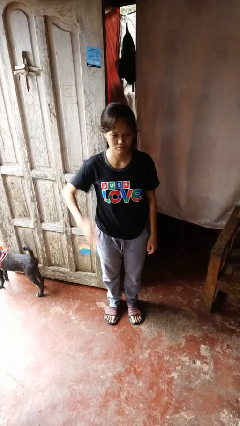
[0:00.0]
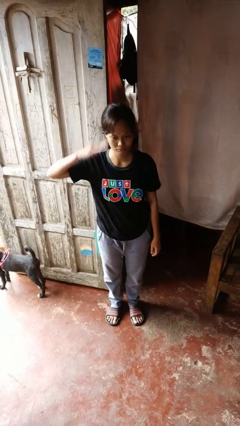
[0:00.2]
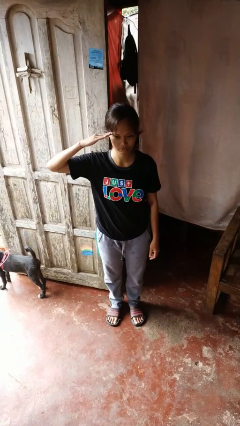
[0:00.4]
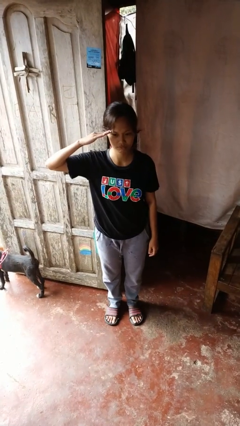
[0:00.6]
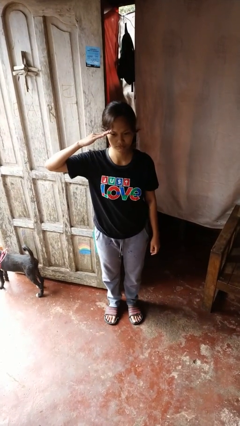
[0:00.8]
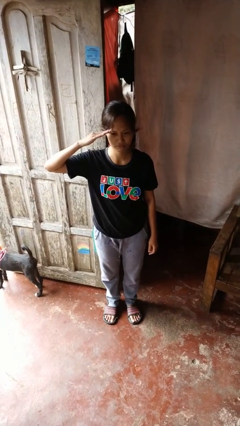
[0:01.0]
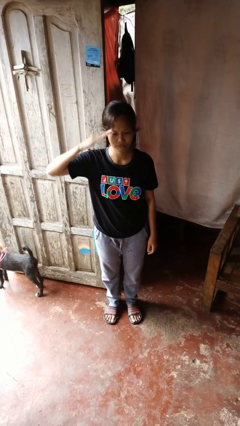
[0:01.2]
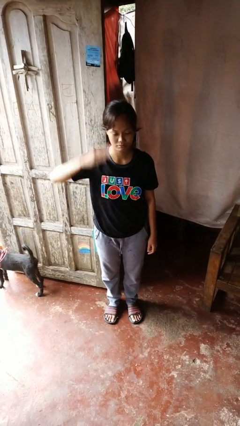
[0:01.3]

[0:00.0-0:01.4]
person salutes

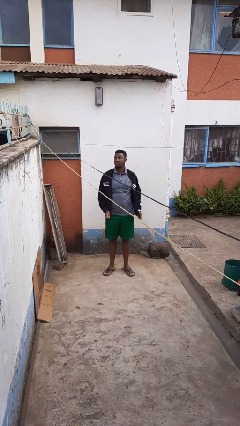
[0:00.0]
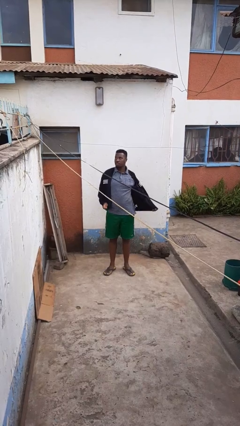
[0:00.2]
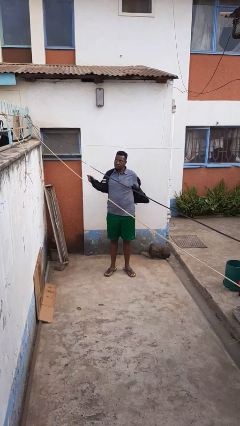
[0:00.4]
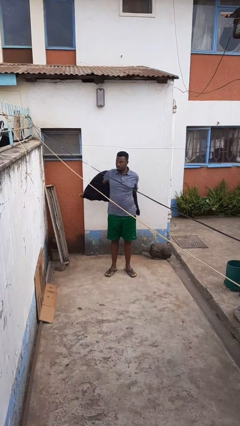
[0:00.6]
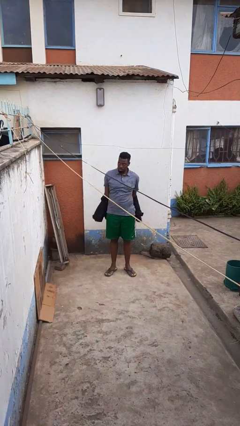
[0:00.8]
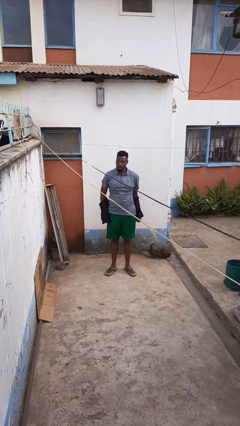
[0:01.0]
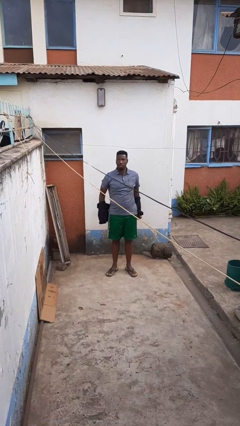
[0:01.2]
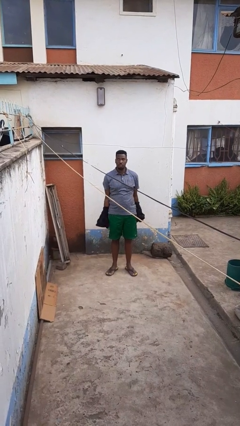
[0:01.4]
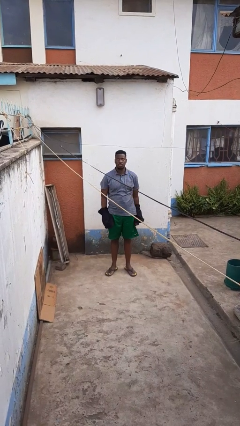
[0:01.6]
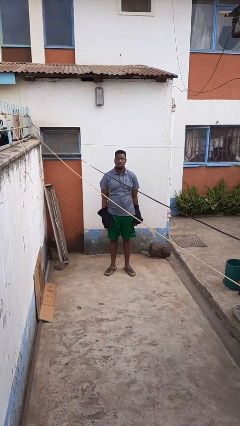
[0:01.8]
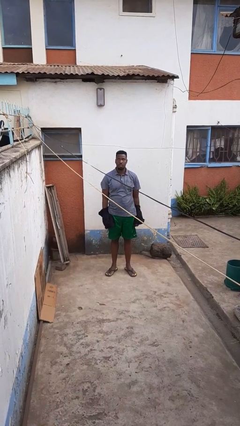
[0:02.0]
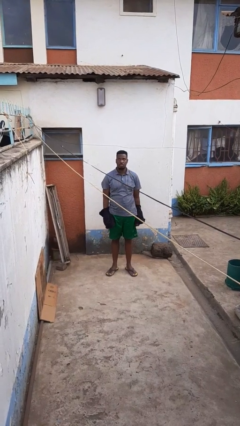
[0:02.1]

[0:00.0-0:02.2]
person takes off jacket

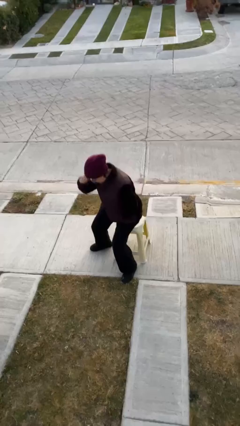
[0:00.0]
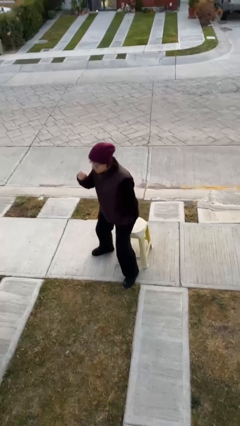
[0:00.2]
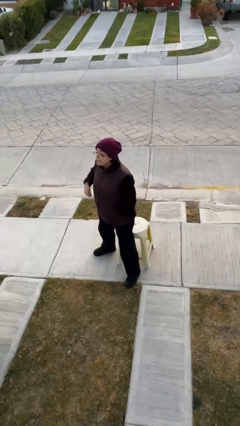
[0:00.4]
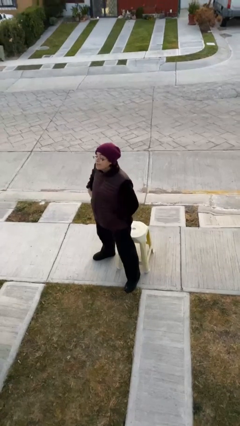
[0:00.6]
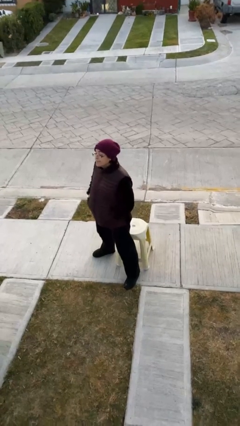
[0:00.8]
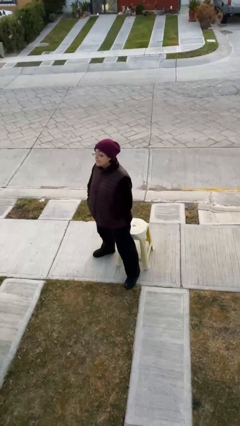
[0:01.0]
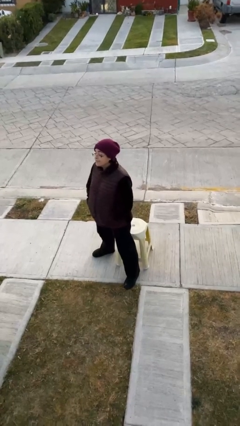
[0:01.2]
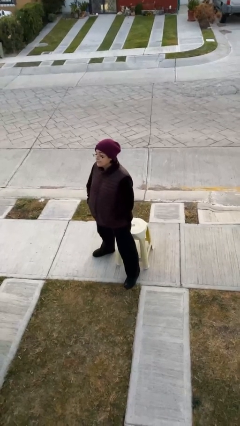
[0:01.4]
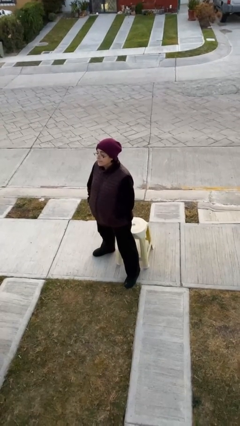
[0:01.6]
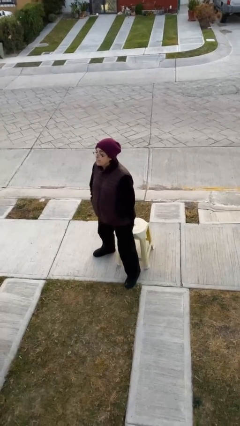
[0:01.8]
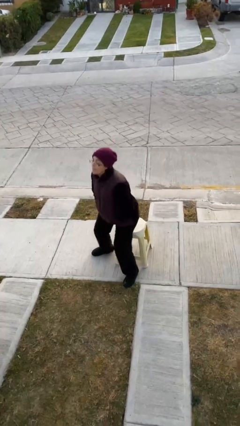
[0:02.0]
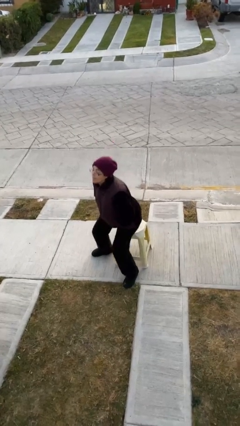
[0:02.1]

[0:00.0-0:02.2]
person stands up

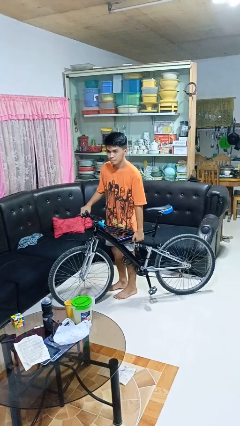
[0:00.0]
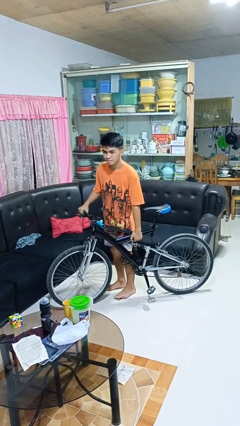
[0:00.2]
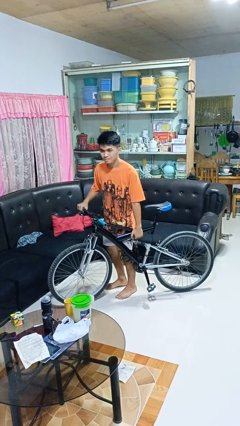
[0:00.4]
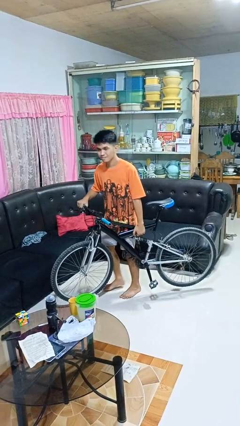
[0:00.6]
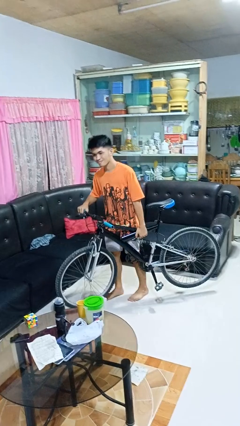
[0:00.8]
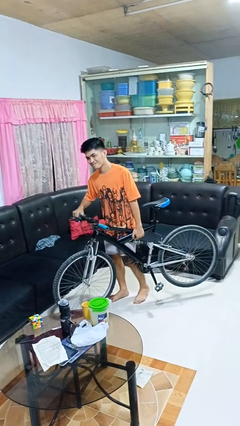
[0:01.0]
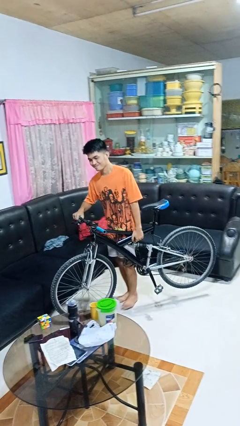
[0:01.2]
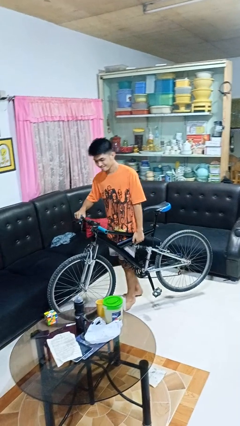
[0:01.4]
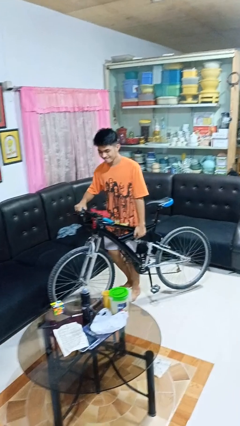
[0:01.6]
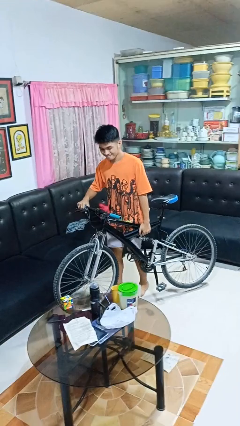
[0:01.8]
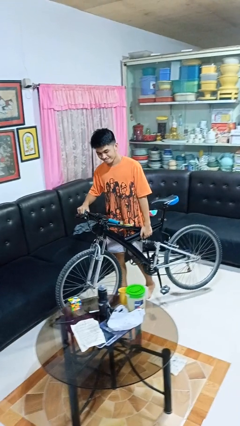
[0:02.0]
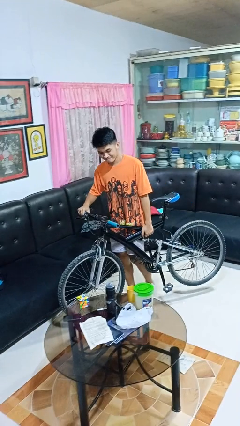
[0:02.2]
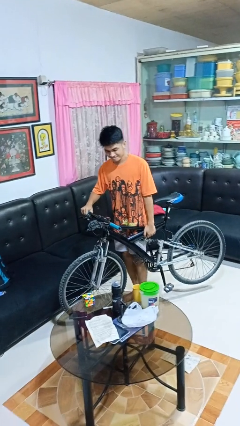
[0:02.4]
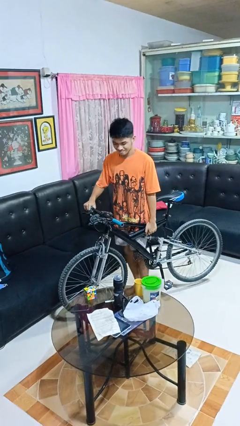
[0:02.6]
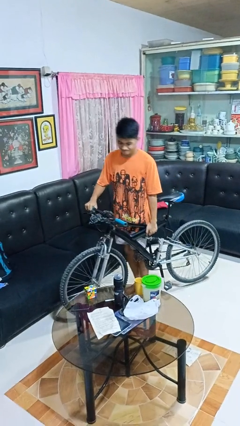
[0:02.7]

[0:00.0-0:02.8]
person carries bicycle

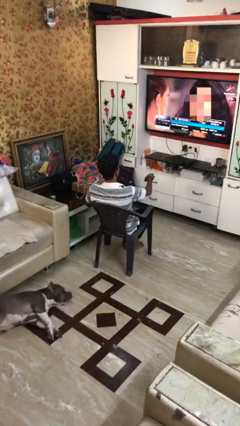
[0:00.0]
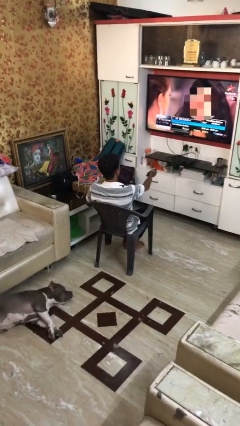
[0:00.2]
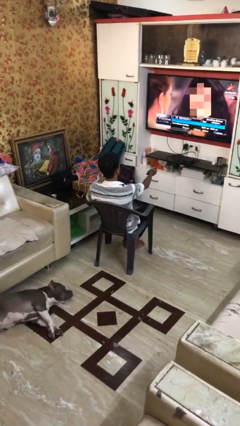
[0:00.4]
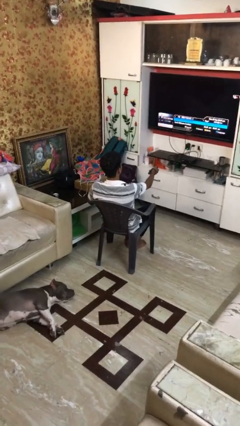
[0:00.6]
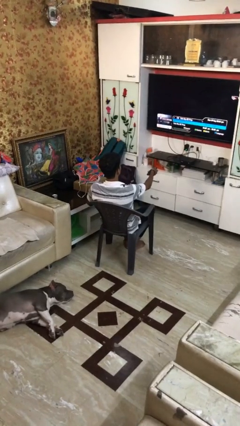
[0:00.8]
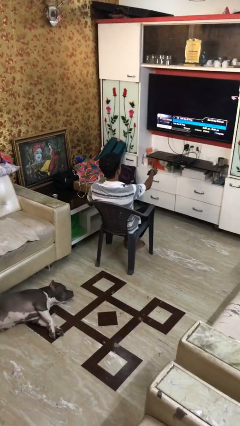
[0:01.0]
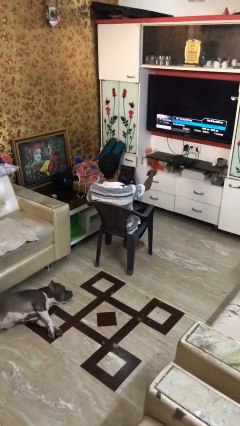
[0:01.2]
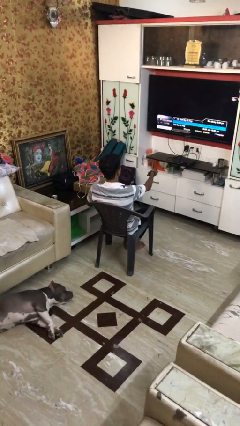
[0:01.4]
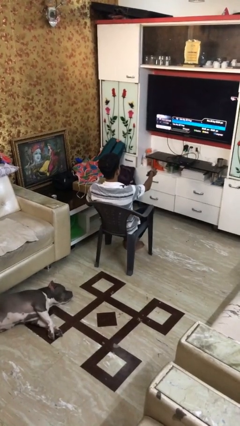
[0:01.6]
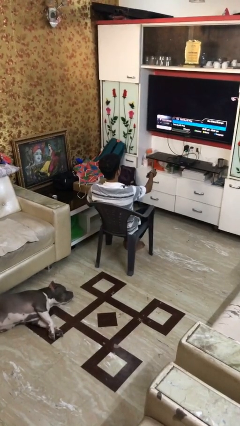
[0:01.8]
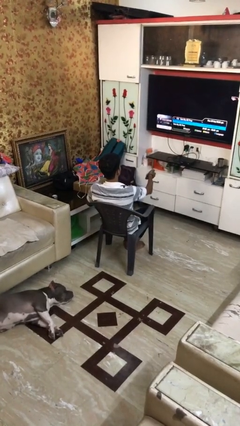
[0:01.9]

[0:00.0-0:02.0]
person uses television remote

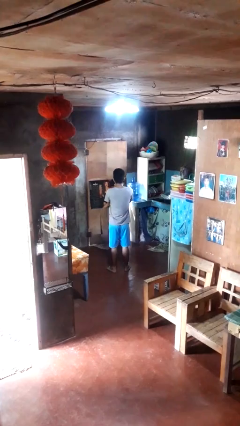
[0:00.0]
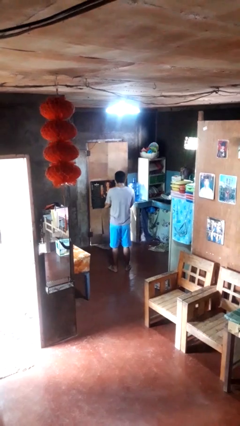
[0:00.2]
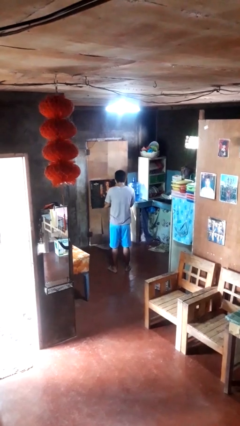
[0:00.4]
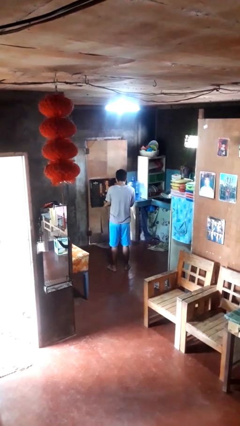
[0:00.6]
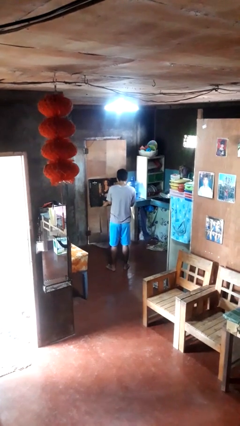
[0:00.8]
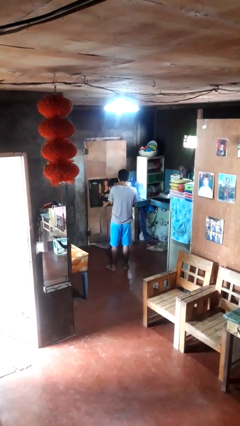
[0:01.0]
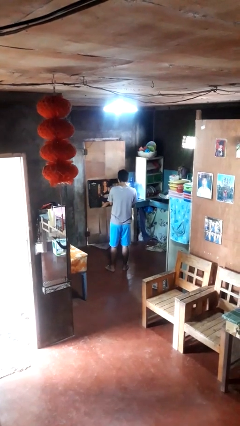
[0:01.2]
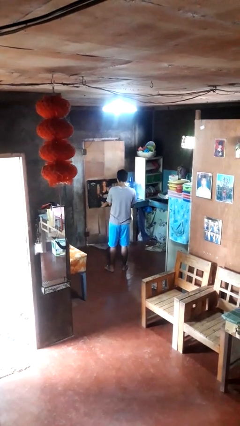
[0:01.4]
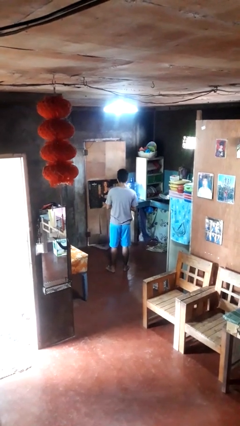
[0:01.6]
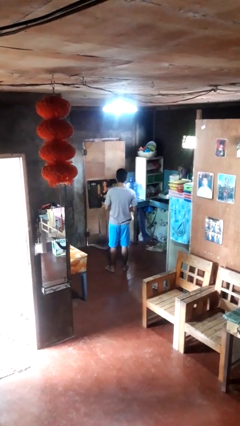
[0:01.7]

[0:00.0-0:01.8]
person sneezes into hand

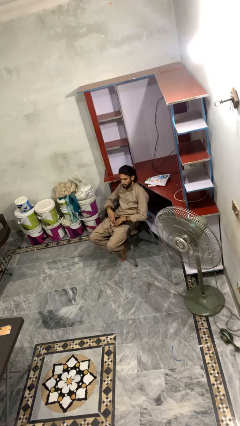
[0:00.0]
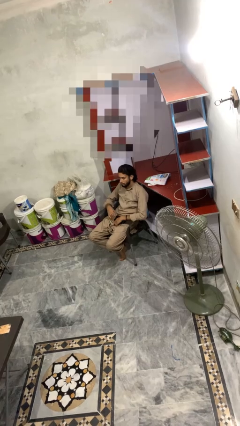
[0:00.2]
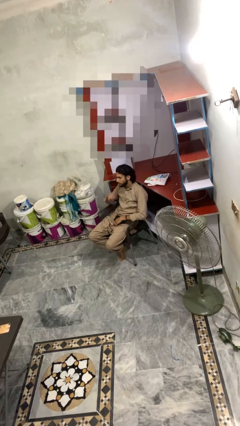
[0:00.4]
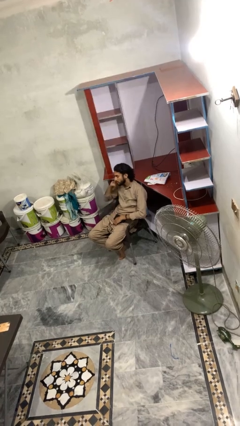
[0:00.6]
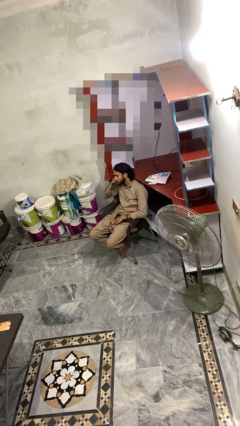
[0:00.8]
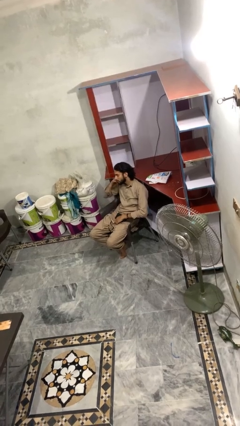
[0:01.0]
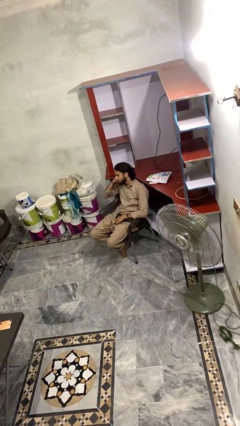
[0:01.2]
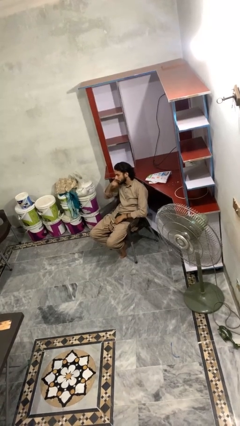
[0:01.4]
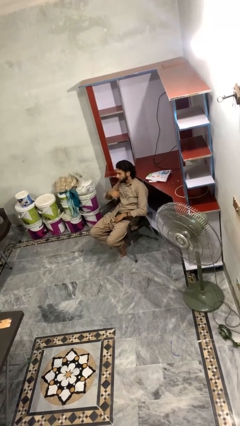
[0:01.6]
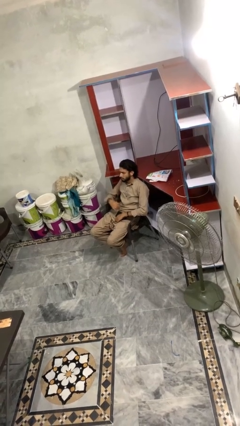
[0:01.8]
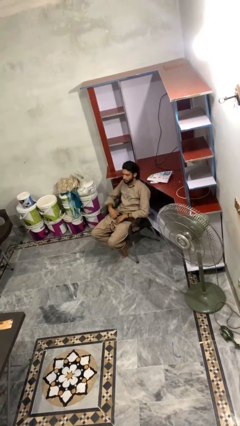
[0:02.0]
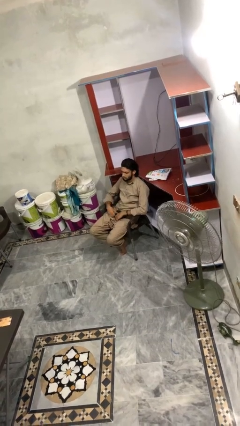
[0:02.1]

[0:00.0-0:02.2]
person gestures call me

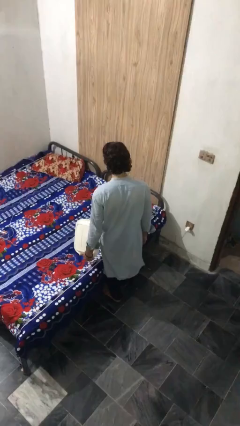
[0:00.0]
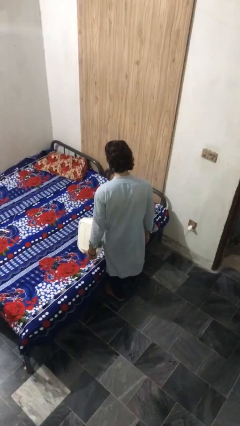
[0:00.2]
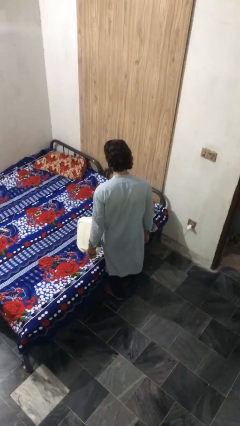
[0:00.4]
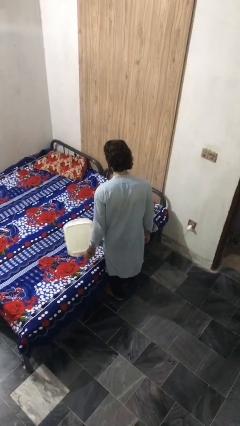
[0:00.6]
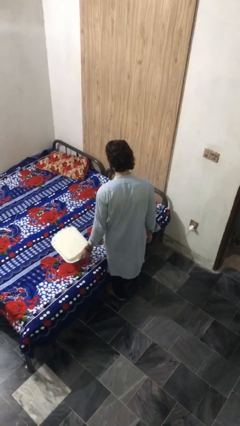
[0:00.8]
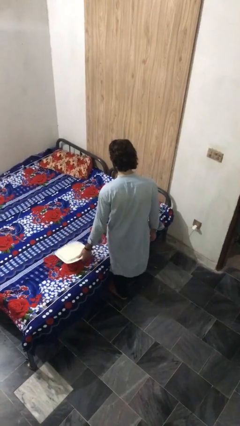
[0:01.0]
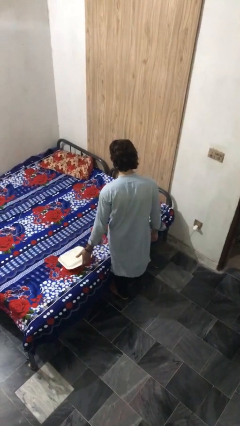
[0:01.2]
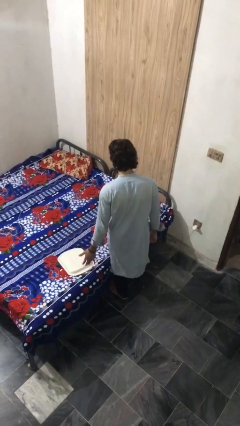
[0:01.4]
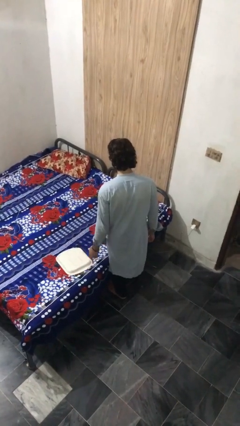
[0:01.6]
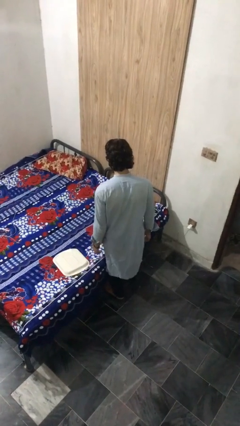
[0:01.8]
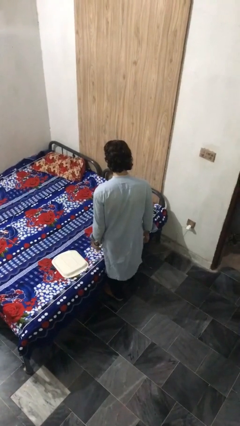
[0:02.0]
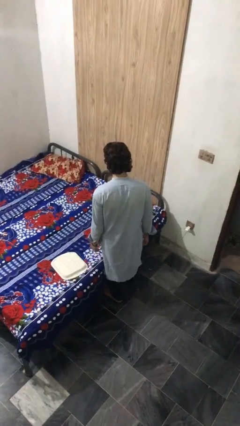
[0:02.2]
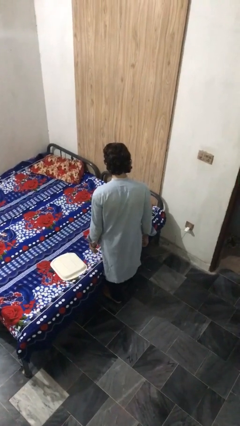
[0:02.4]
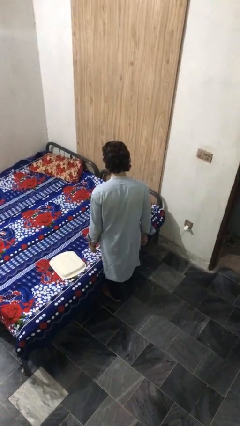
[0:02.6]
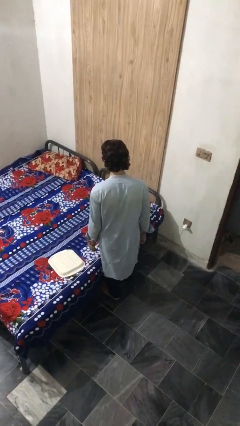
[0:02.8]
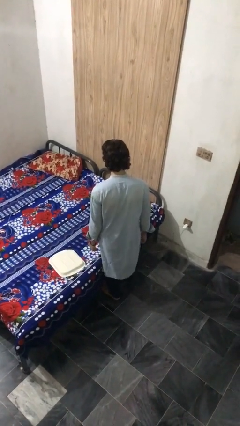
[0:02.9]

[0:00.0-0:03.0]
person puts down object on bed
